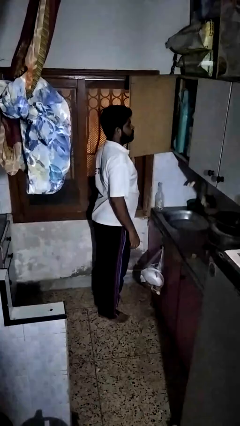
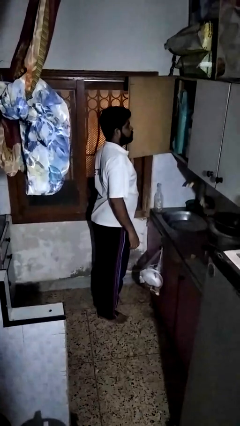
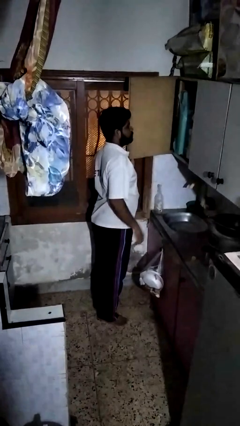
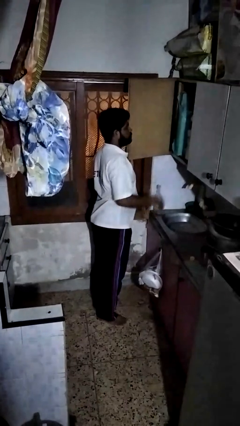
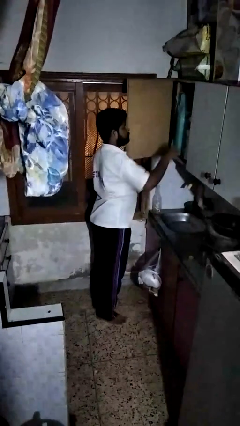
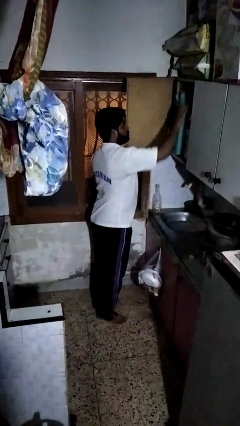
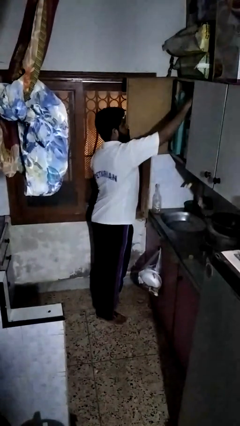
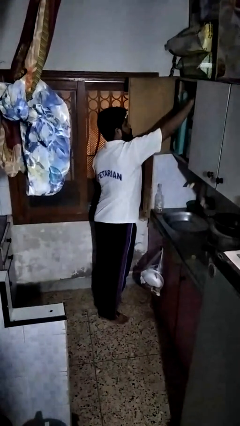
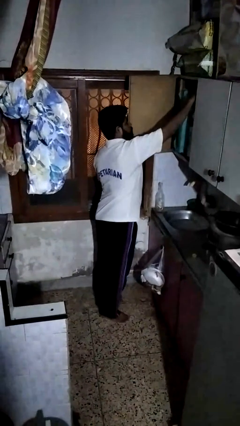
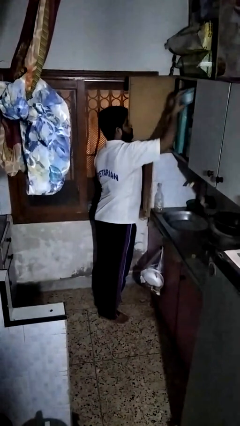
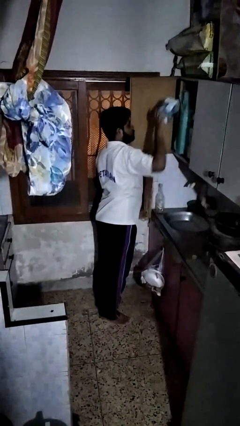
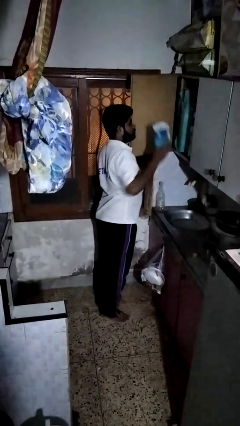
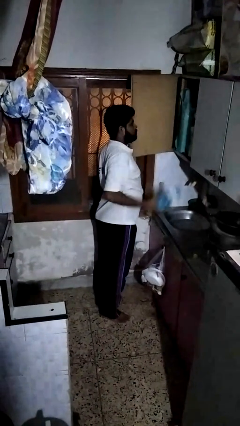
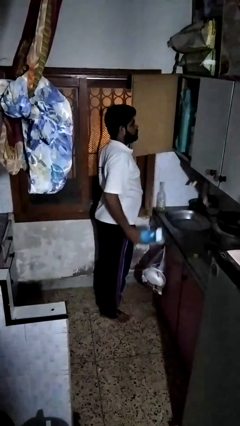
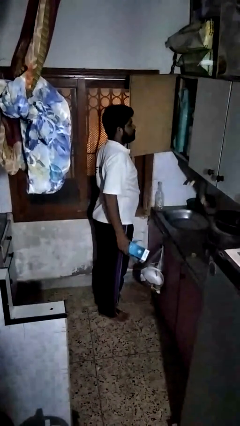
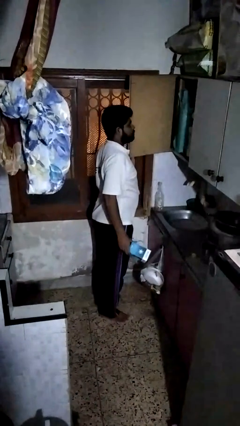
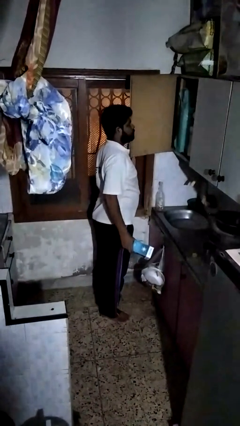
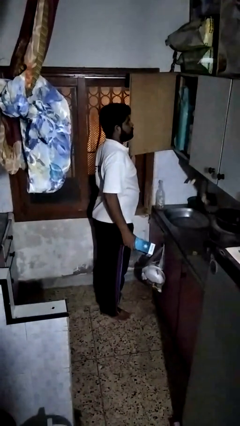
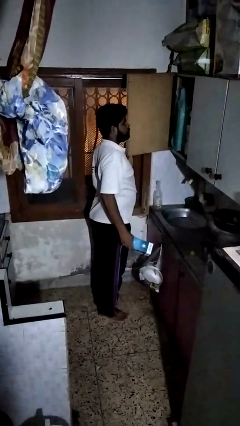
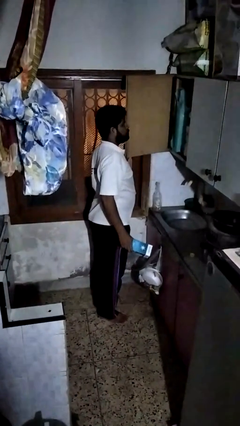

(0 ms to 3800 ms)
person picks up object from cabinet

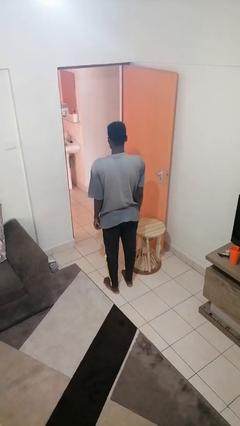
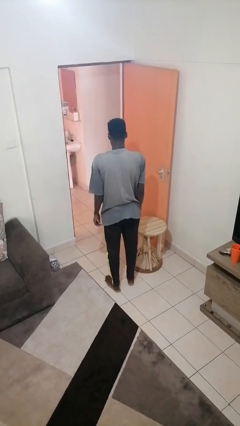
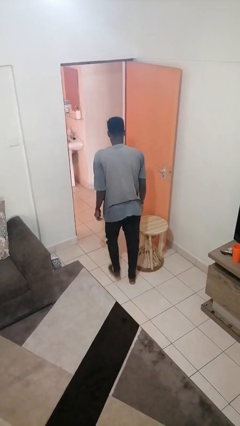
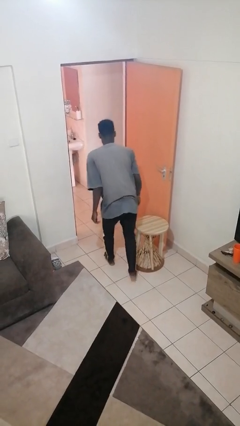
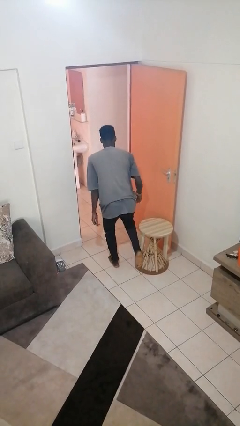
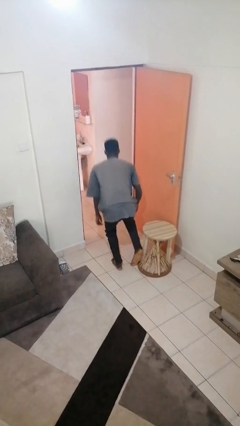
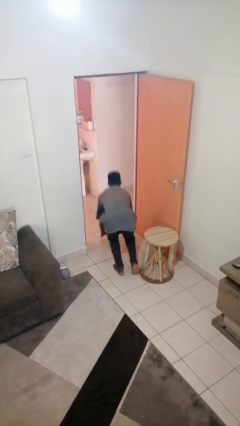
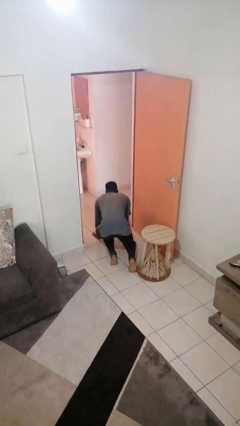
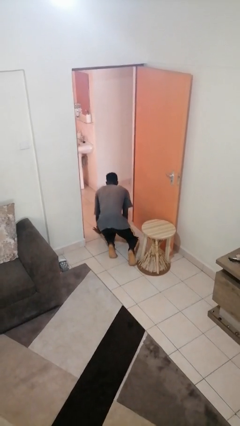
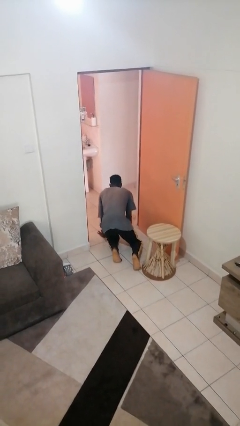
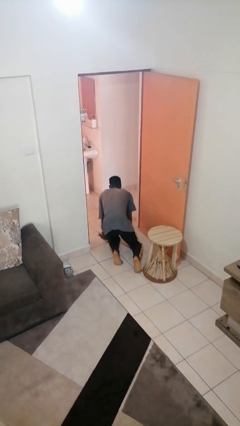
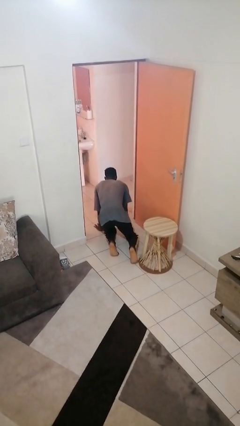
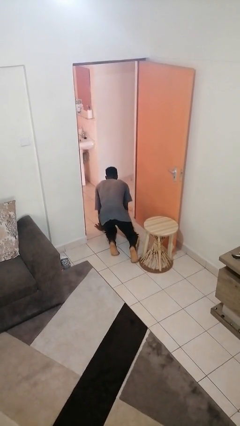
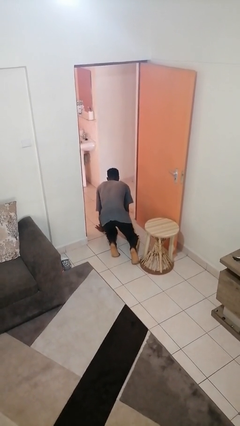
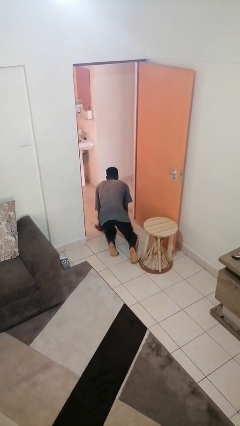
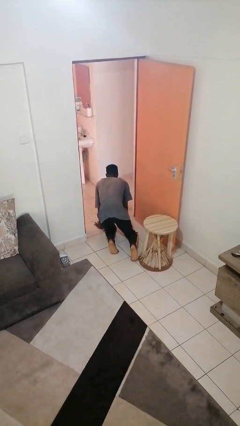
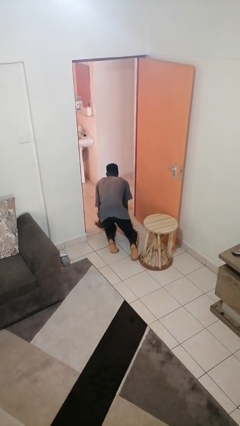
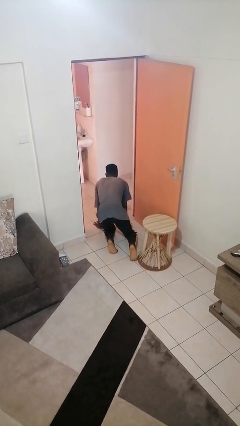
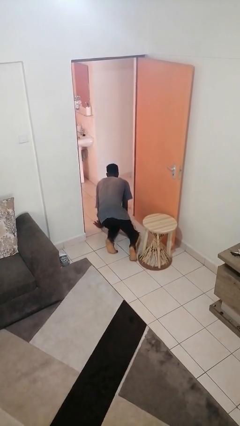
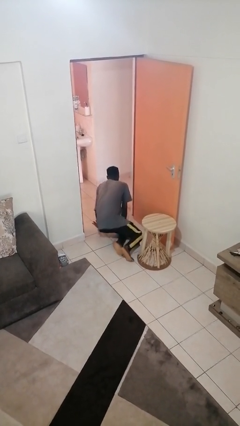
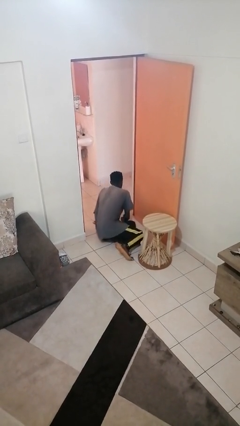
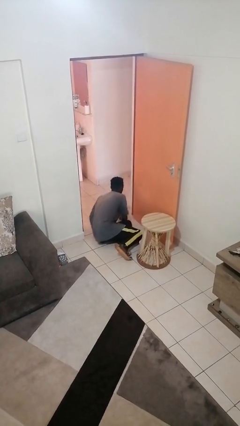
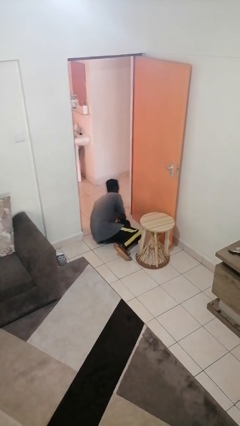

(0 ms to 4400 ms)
person trips on object on floor

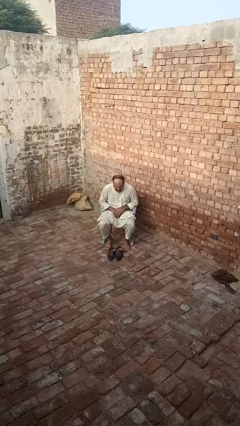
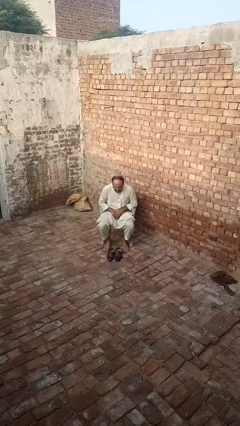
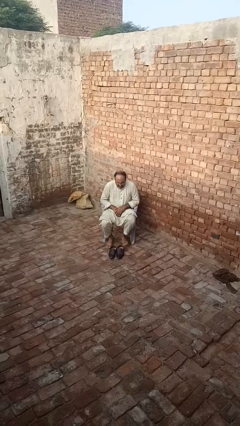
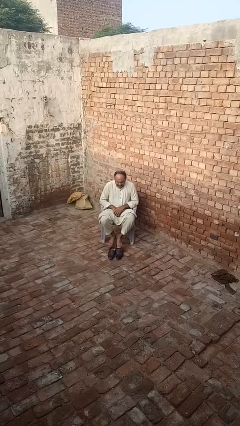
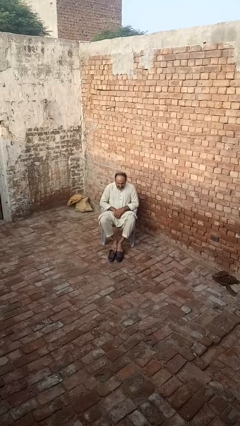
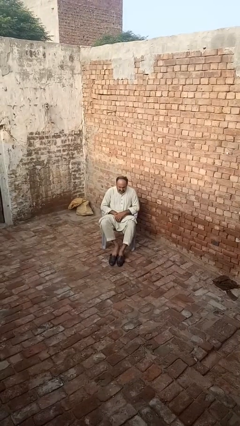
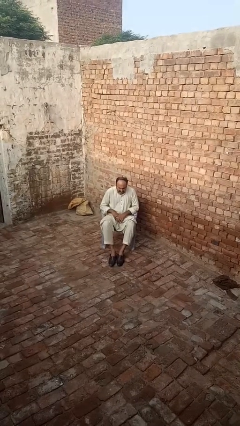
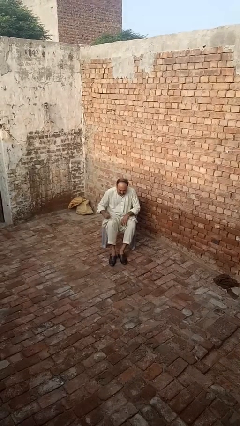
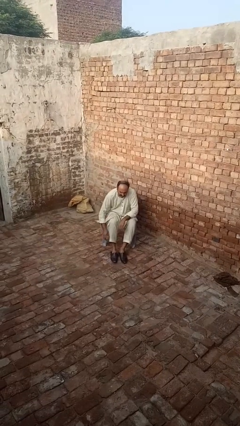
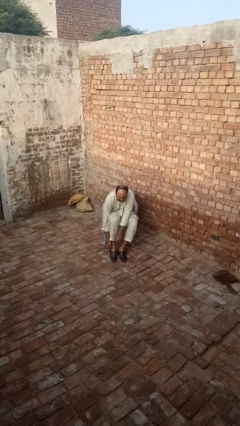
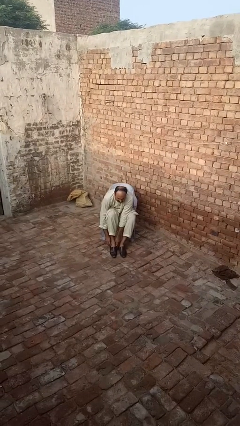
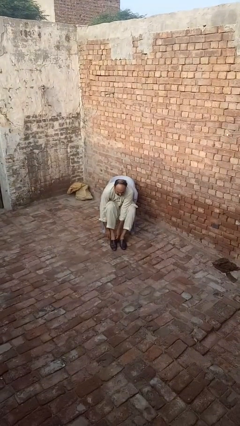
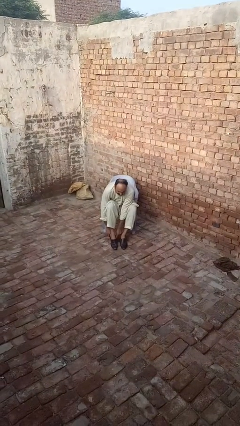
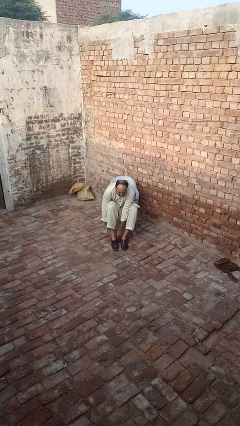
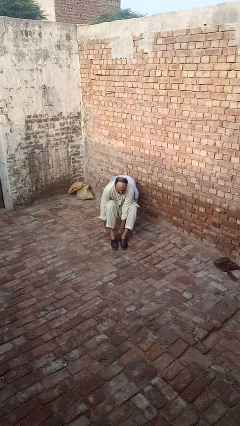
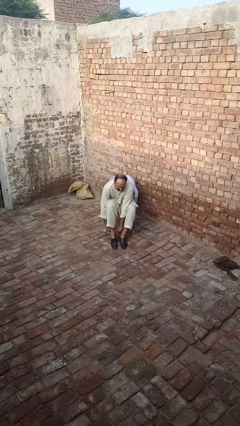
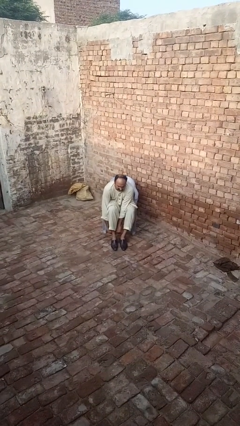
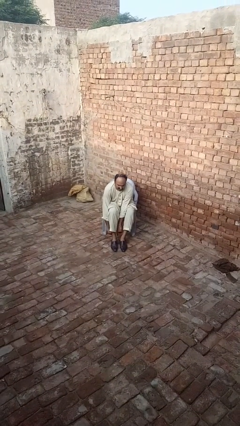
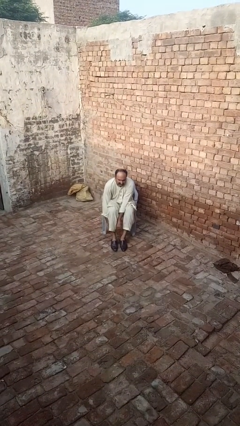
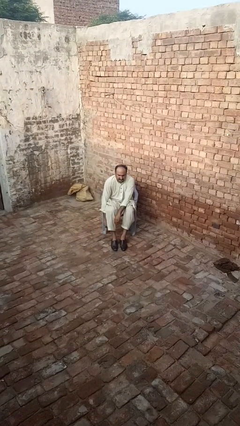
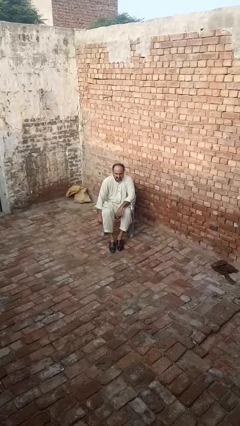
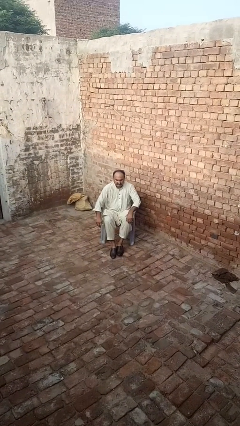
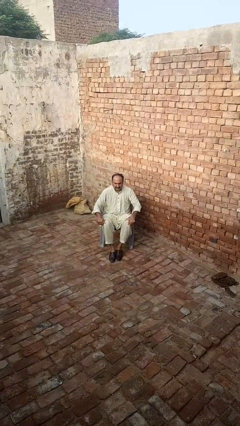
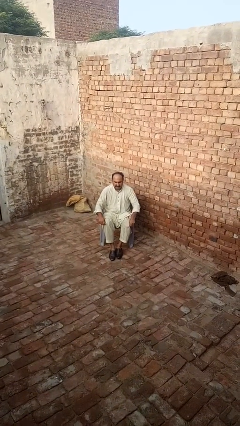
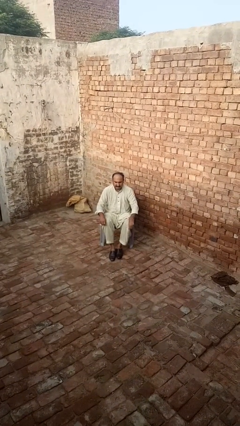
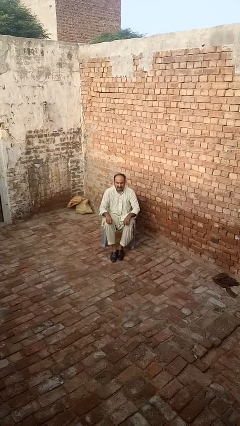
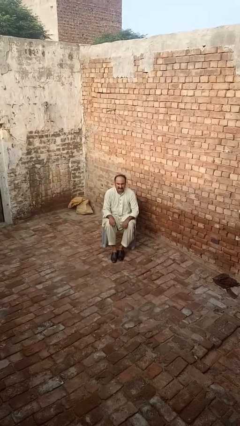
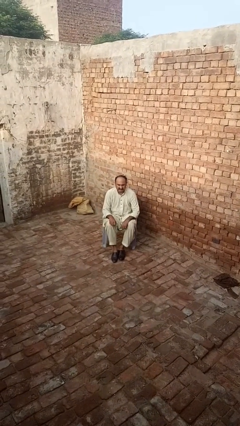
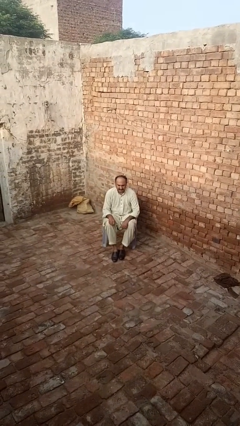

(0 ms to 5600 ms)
person puts on shoes

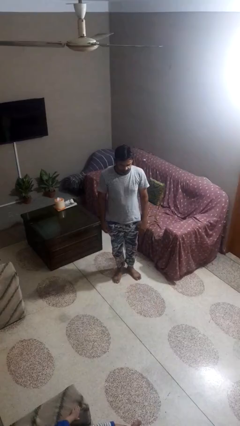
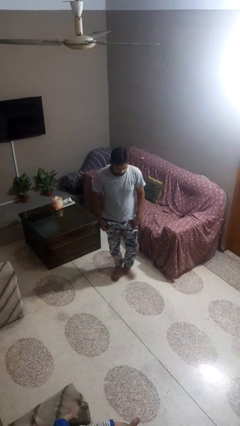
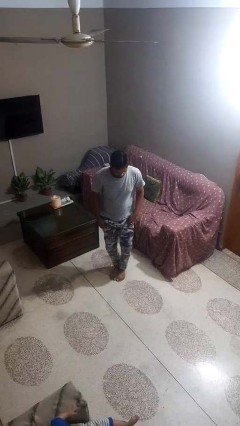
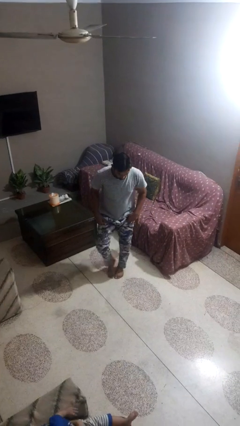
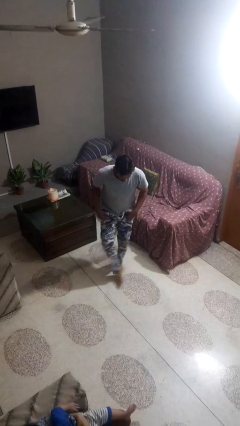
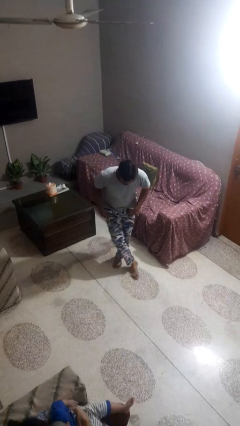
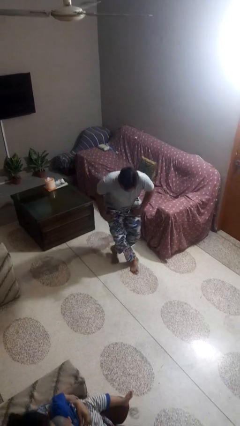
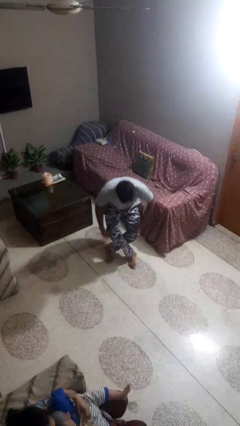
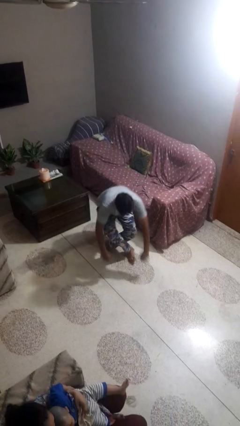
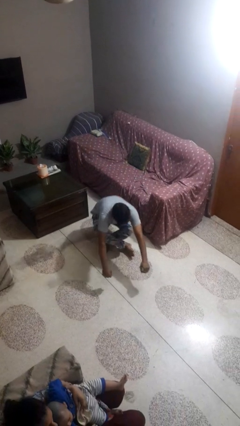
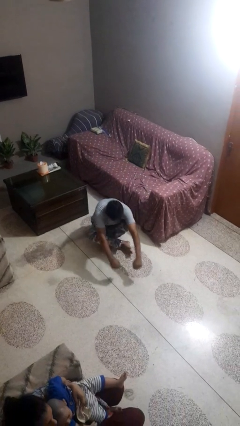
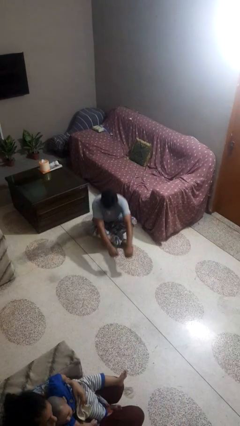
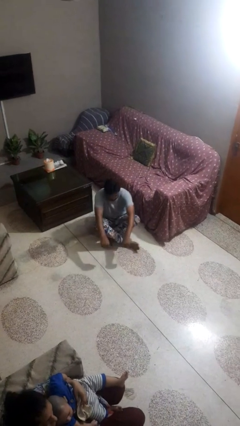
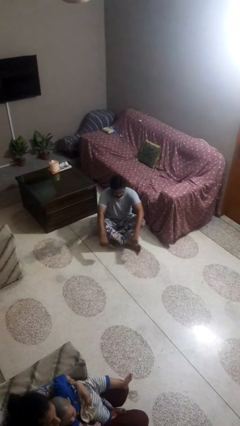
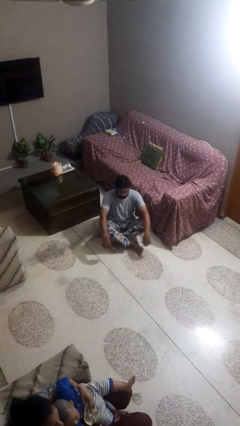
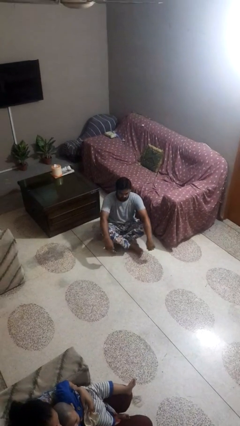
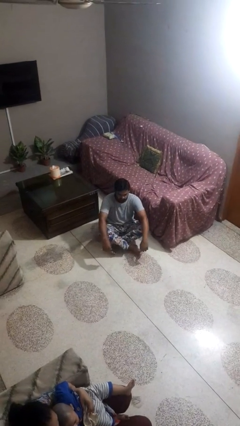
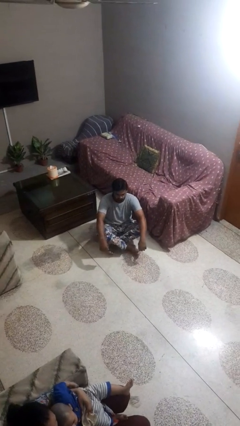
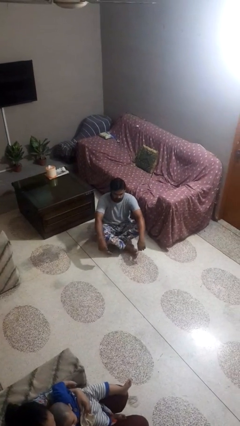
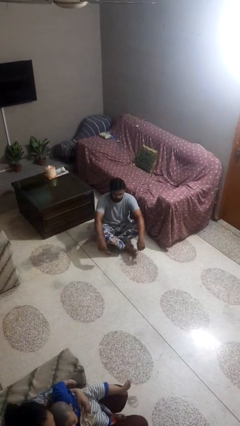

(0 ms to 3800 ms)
person sits crisscross
